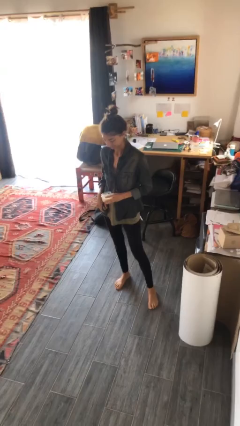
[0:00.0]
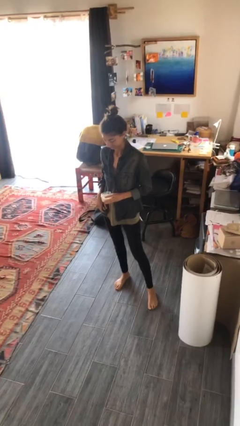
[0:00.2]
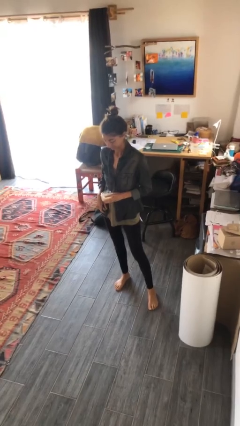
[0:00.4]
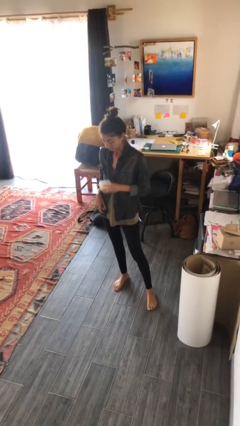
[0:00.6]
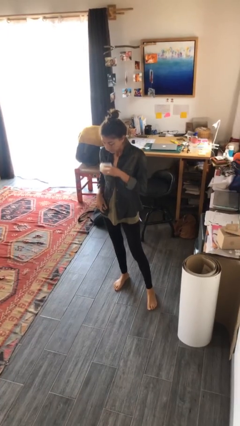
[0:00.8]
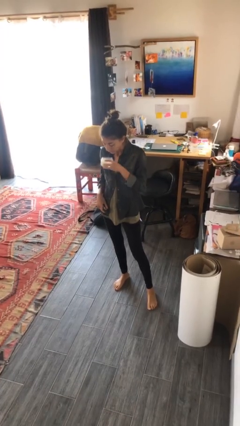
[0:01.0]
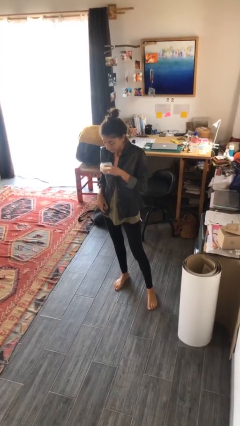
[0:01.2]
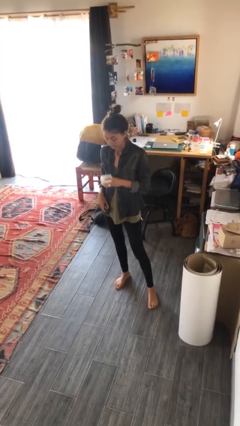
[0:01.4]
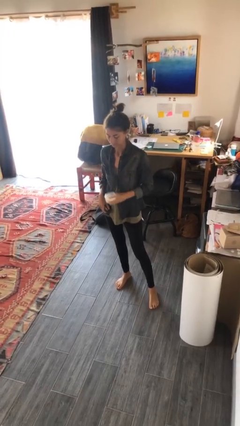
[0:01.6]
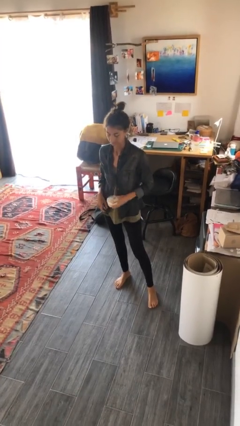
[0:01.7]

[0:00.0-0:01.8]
person extinguishes candle

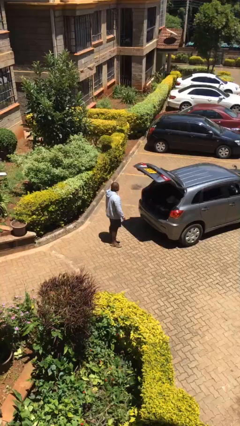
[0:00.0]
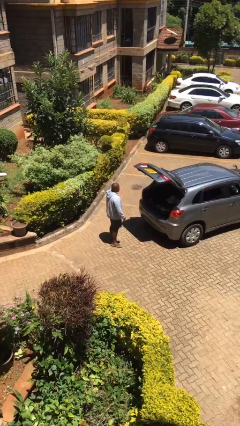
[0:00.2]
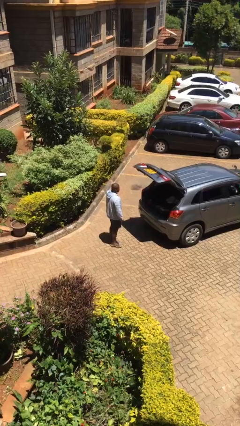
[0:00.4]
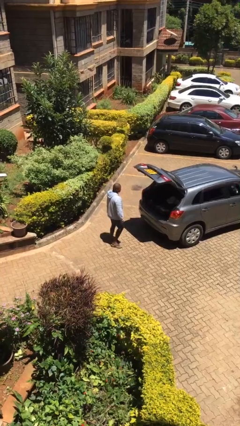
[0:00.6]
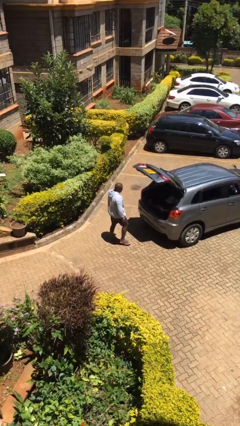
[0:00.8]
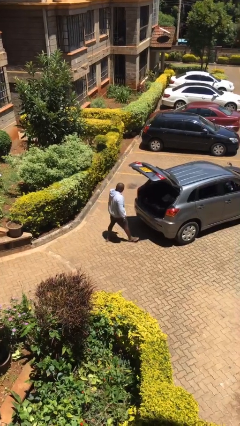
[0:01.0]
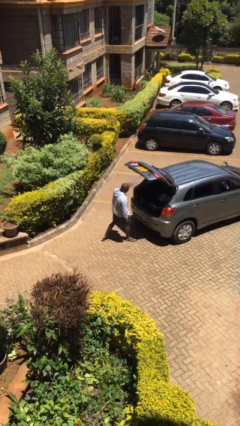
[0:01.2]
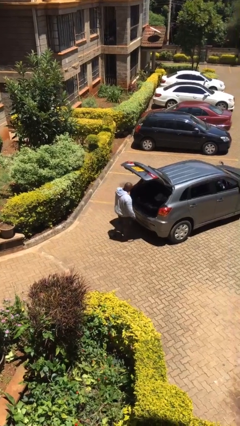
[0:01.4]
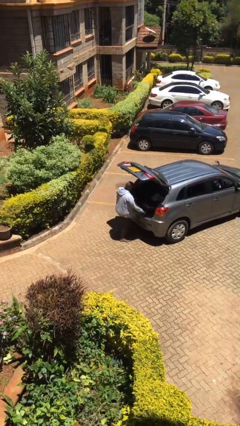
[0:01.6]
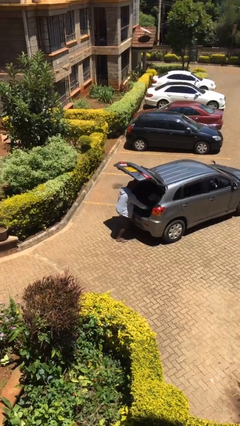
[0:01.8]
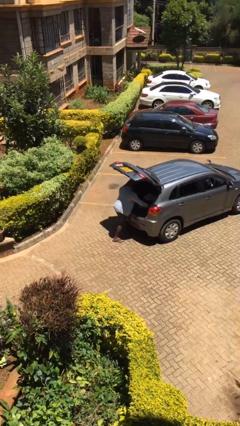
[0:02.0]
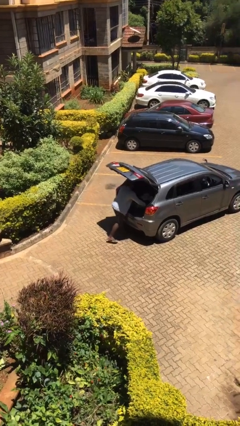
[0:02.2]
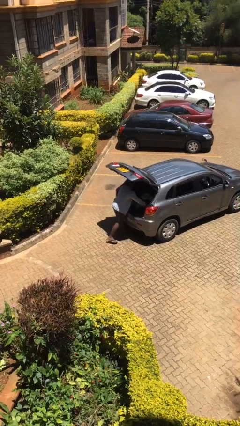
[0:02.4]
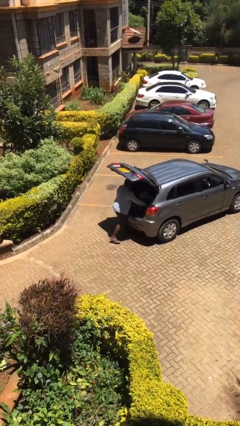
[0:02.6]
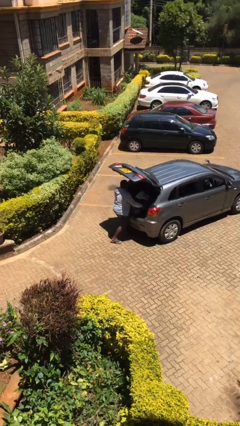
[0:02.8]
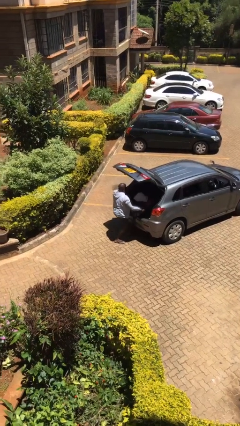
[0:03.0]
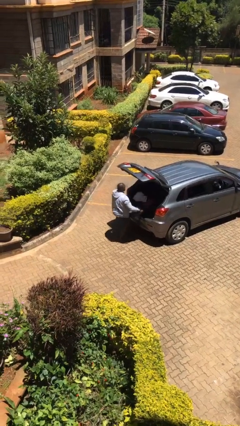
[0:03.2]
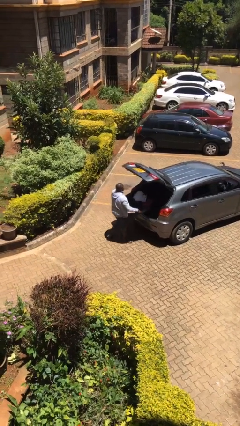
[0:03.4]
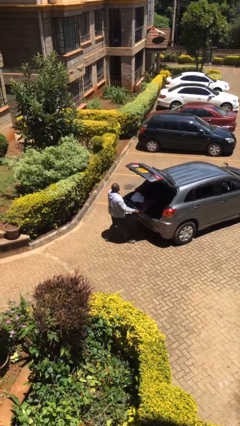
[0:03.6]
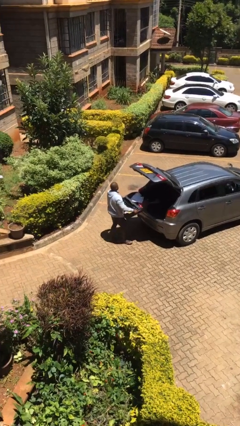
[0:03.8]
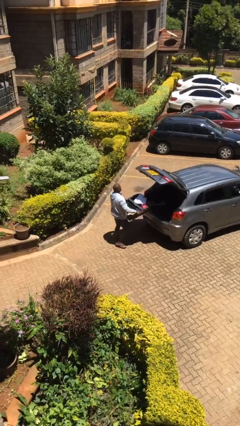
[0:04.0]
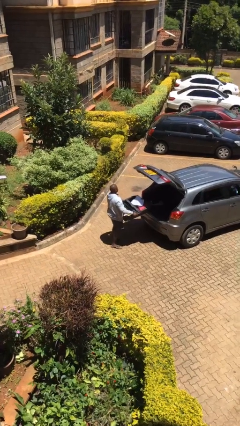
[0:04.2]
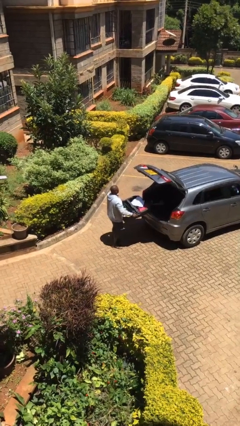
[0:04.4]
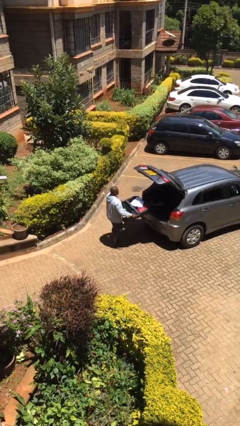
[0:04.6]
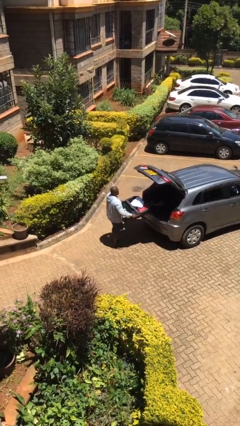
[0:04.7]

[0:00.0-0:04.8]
person unloads car

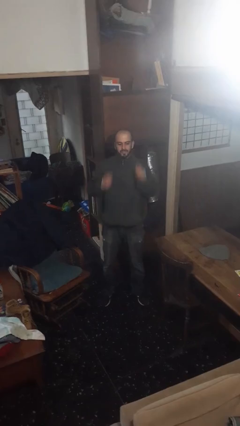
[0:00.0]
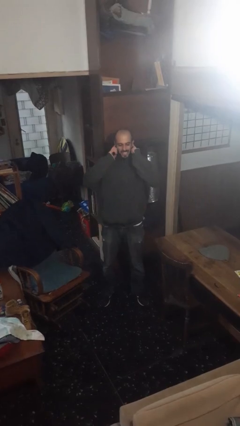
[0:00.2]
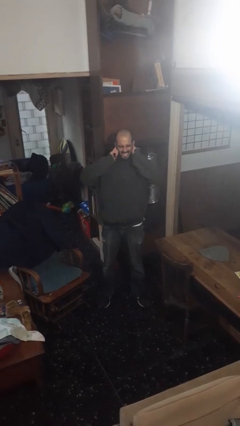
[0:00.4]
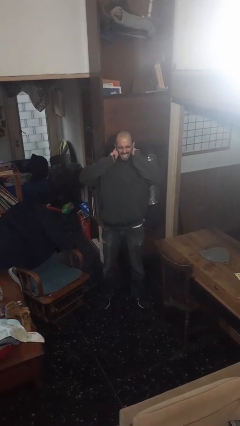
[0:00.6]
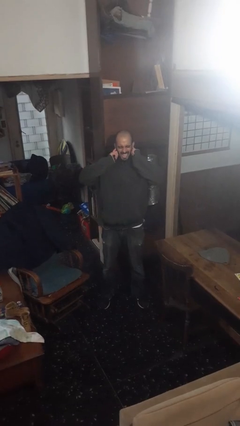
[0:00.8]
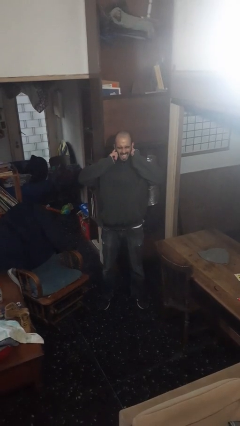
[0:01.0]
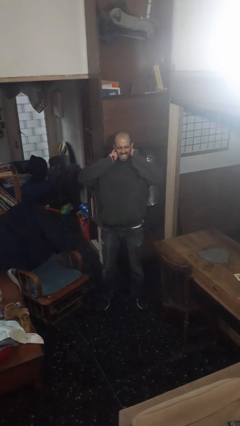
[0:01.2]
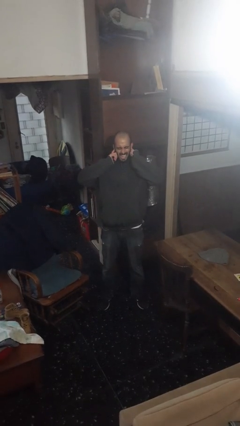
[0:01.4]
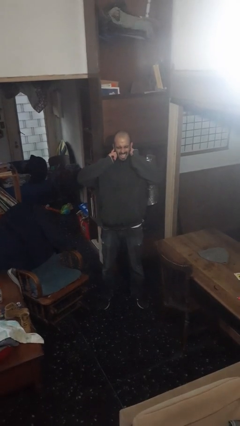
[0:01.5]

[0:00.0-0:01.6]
person puts fingers in ear

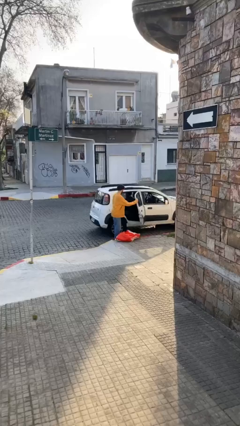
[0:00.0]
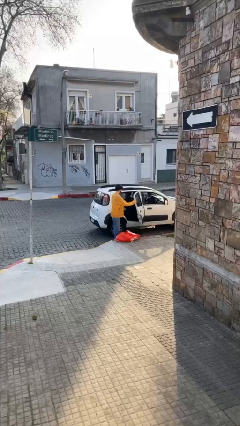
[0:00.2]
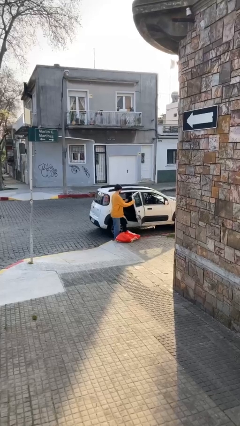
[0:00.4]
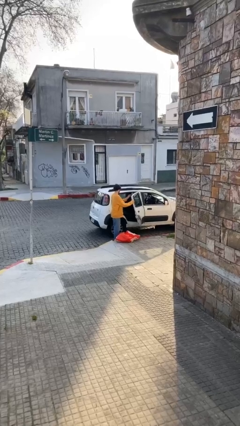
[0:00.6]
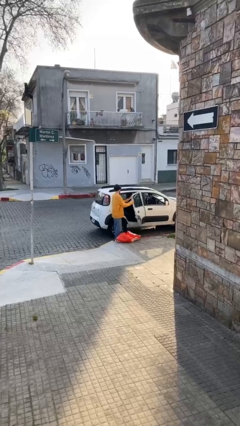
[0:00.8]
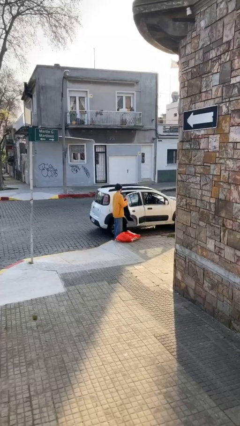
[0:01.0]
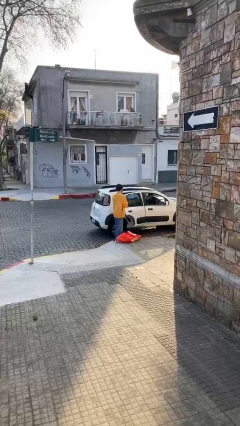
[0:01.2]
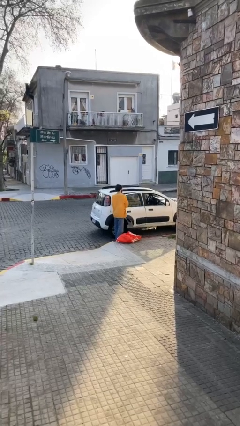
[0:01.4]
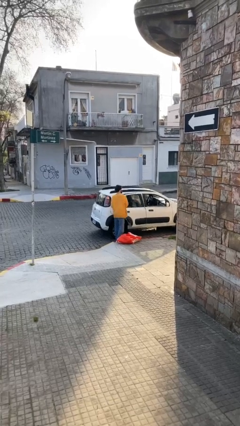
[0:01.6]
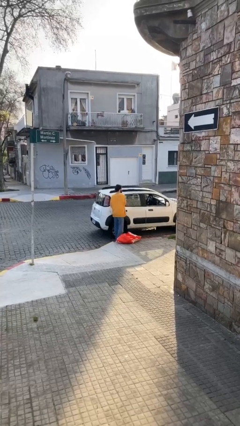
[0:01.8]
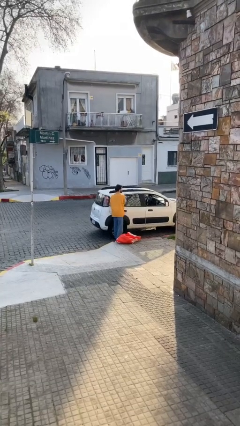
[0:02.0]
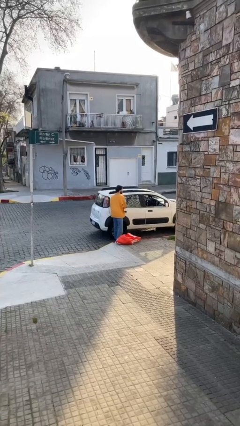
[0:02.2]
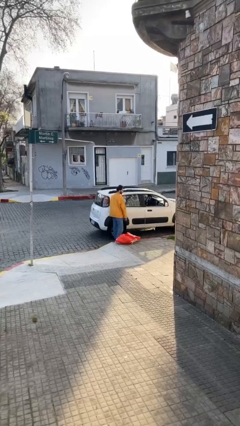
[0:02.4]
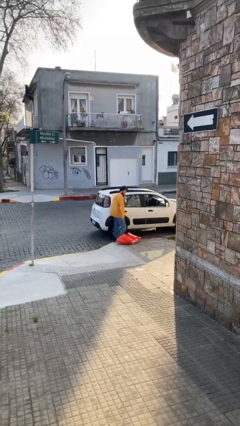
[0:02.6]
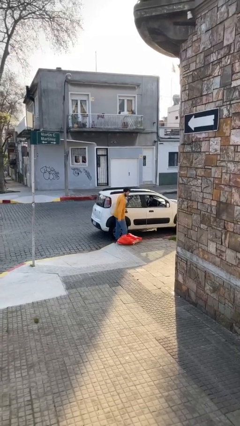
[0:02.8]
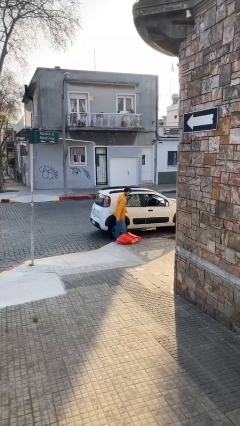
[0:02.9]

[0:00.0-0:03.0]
person closes car door

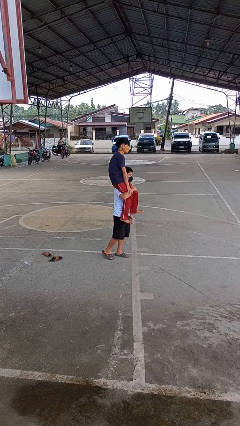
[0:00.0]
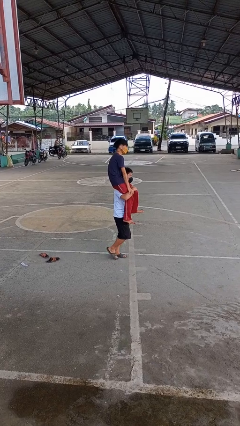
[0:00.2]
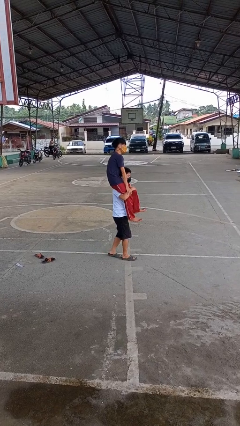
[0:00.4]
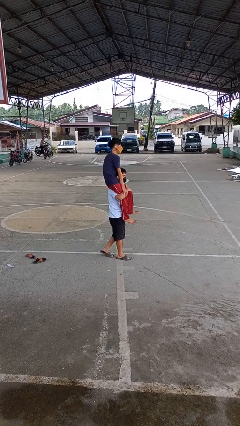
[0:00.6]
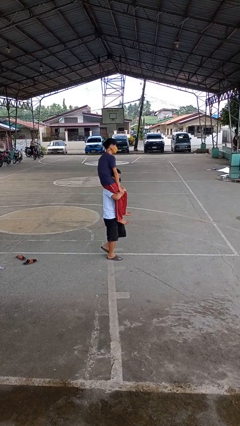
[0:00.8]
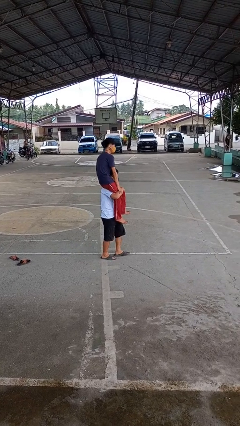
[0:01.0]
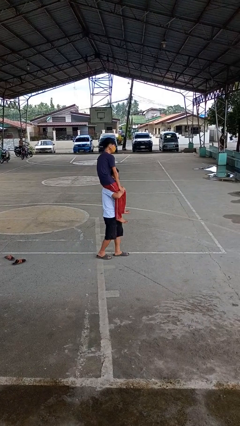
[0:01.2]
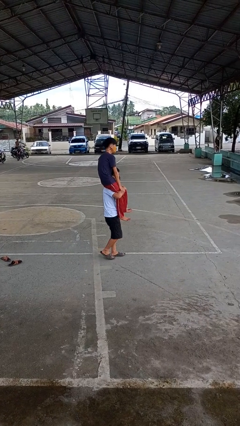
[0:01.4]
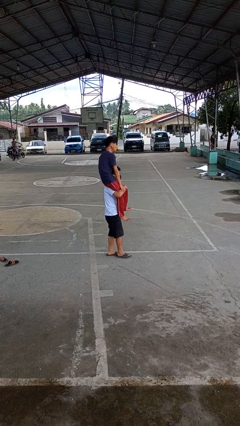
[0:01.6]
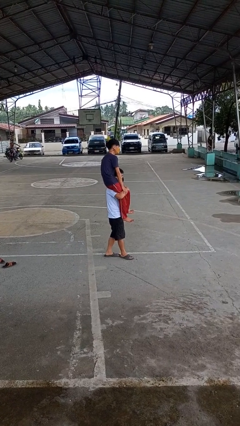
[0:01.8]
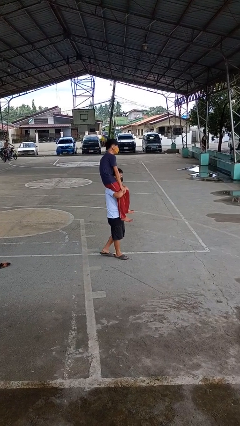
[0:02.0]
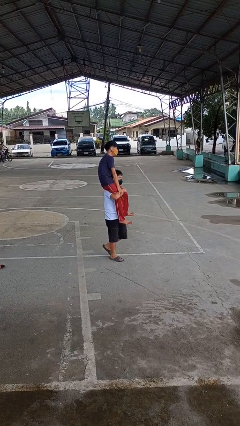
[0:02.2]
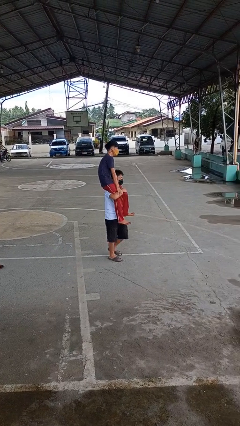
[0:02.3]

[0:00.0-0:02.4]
person carries person on shoulders

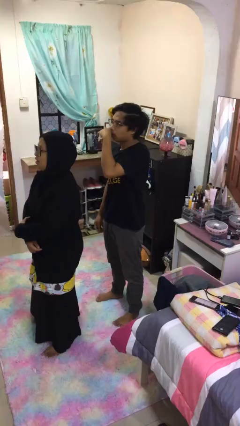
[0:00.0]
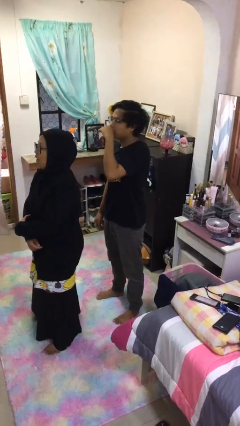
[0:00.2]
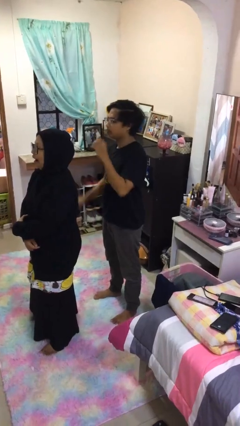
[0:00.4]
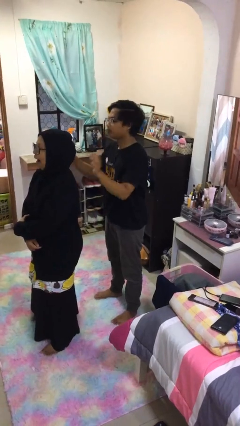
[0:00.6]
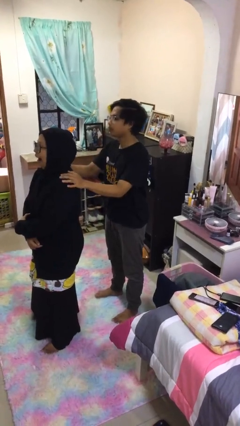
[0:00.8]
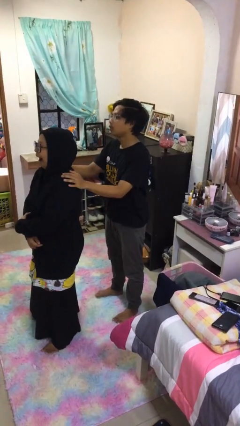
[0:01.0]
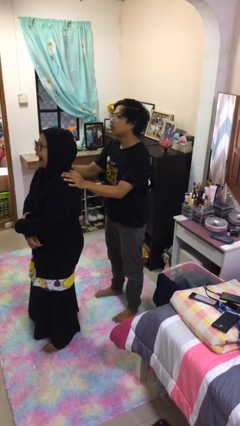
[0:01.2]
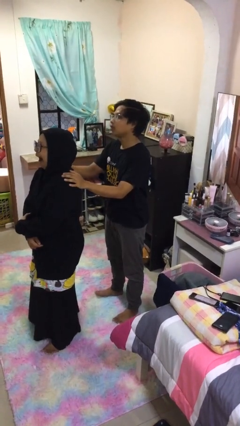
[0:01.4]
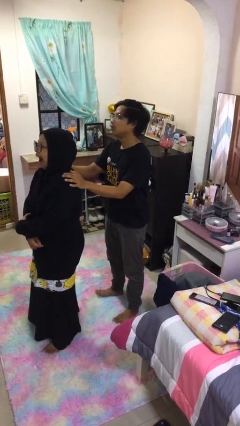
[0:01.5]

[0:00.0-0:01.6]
person grabs person by shoulder

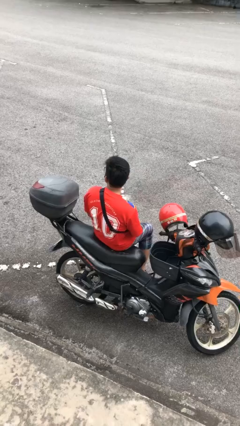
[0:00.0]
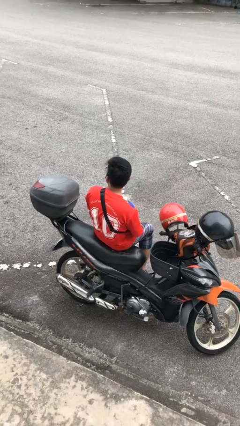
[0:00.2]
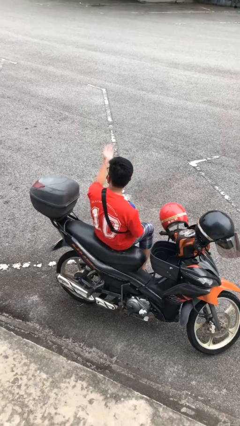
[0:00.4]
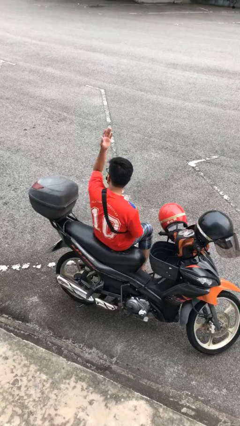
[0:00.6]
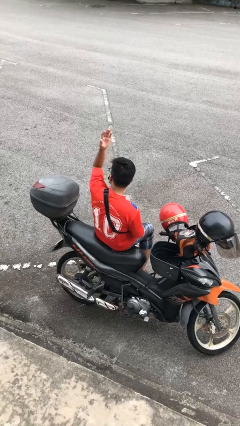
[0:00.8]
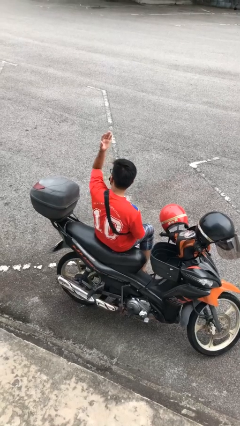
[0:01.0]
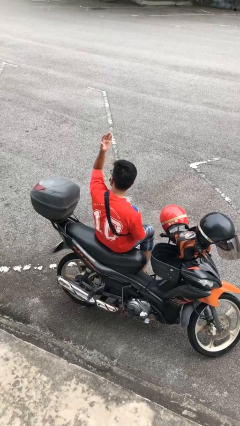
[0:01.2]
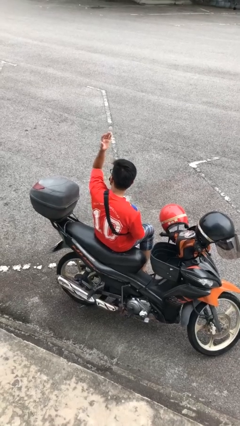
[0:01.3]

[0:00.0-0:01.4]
person gestures swipe up

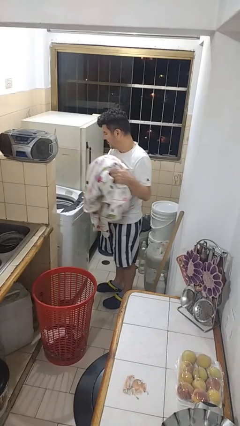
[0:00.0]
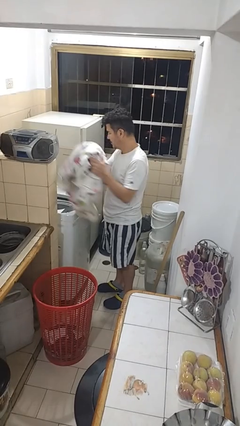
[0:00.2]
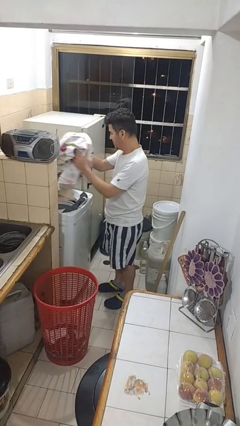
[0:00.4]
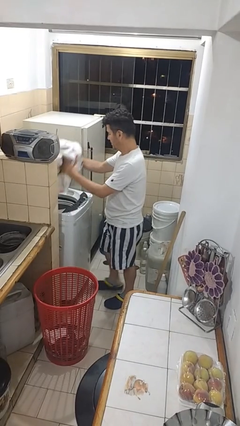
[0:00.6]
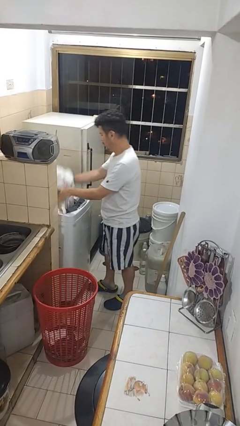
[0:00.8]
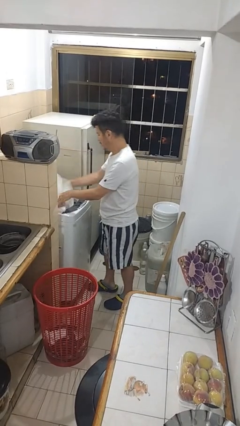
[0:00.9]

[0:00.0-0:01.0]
person loads clotheswasher
